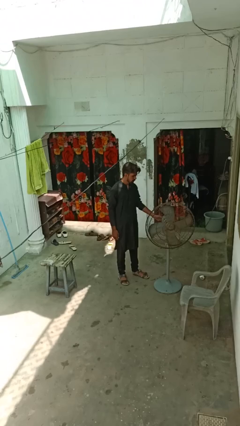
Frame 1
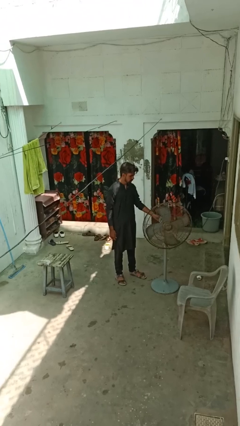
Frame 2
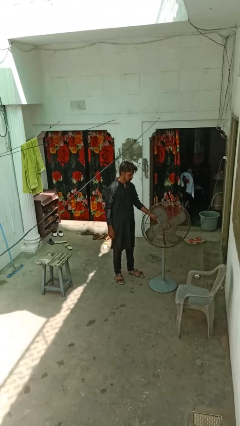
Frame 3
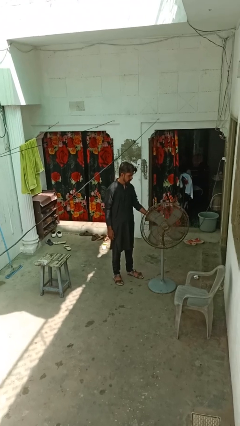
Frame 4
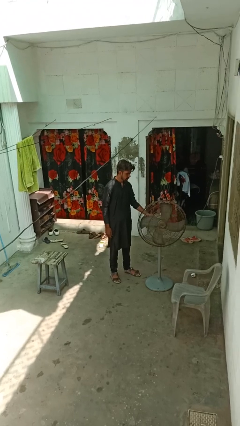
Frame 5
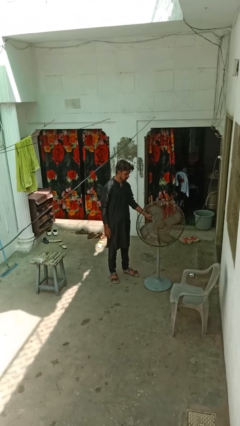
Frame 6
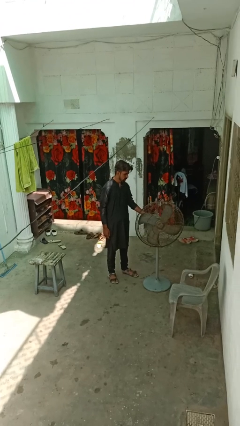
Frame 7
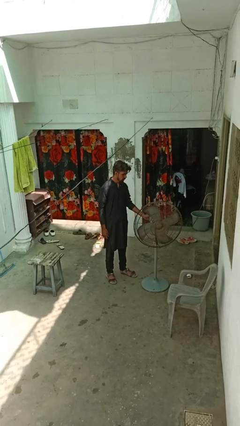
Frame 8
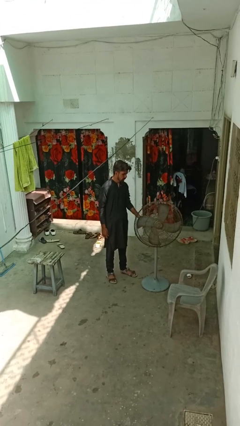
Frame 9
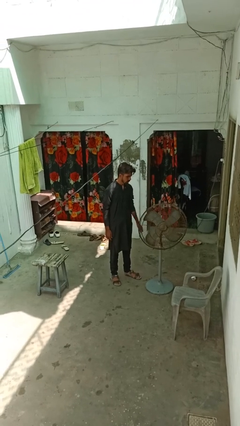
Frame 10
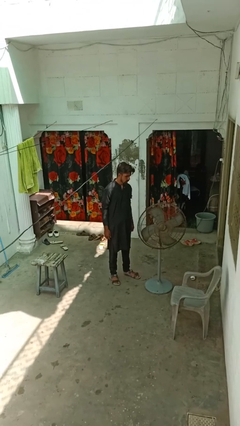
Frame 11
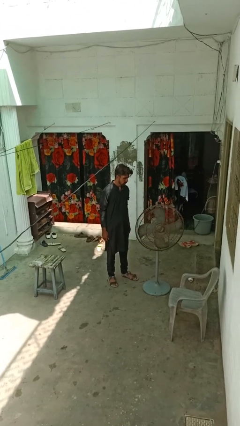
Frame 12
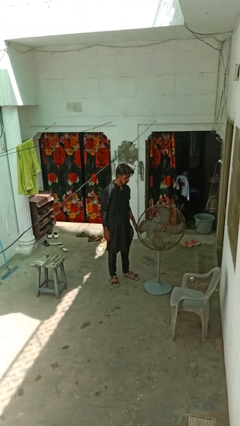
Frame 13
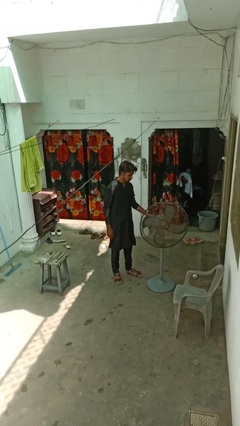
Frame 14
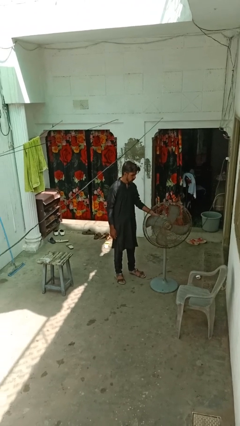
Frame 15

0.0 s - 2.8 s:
person turns off fan

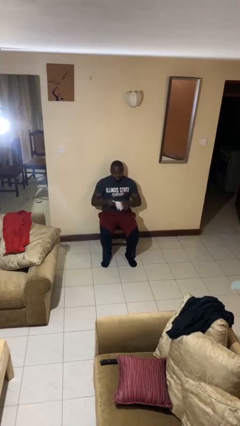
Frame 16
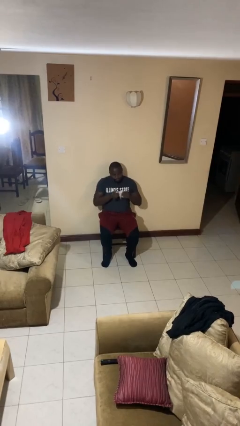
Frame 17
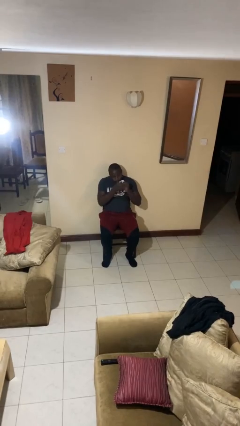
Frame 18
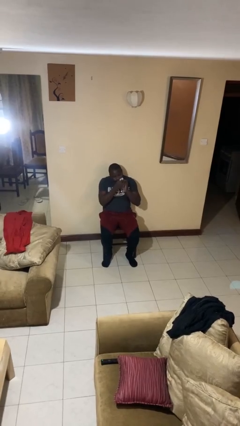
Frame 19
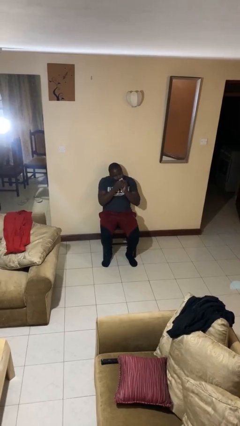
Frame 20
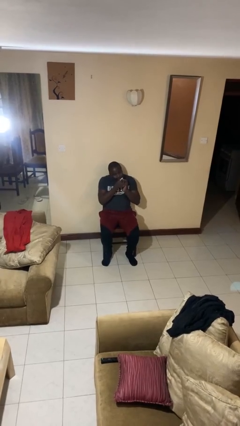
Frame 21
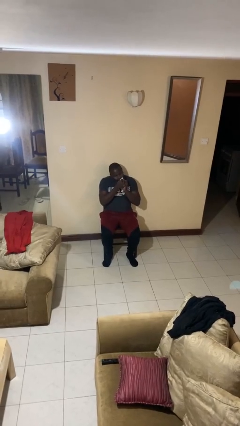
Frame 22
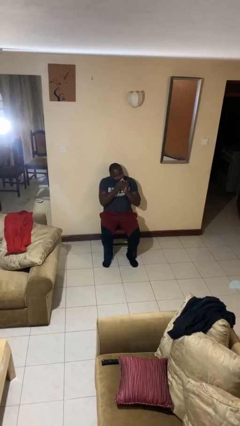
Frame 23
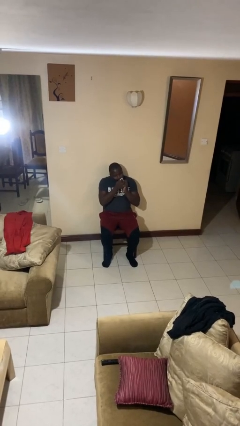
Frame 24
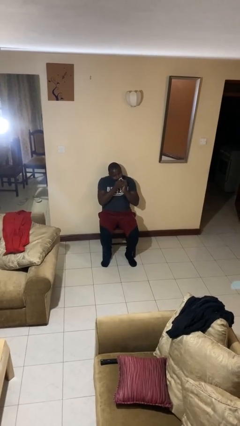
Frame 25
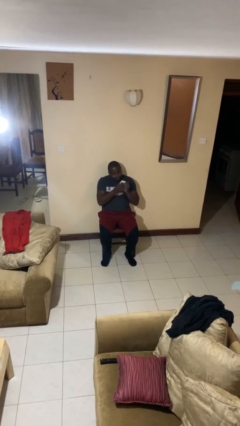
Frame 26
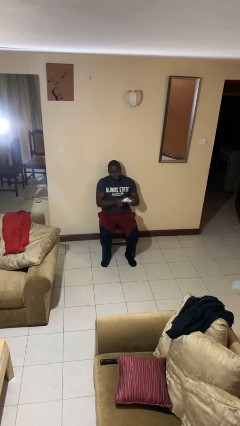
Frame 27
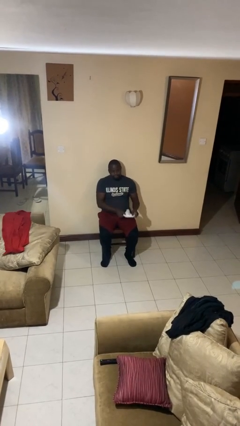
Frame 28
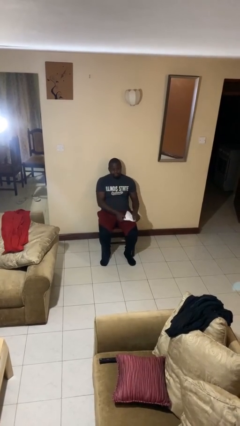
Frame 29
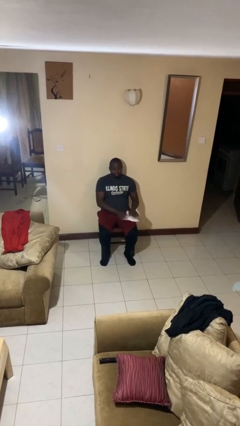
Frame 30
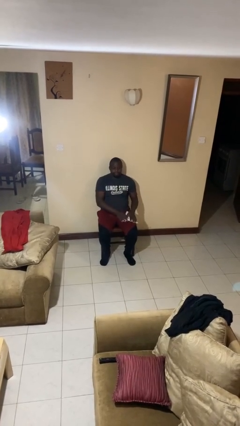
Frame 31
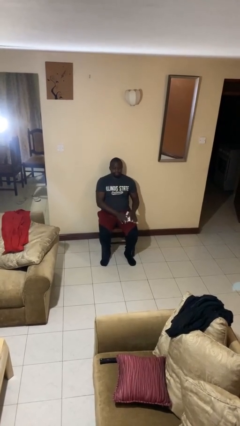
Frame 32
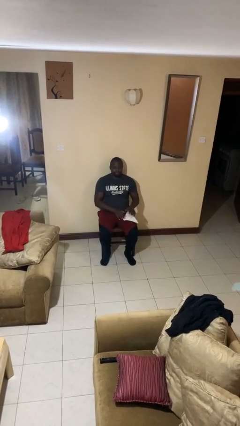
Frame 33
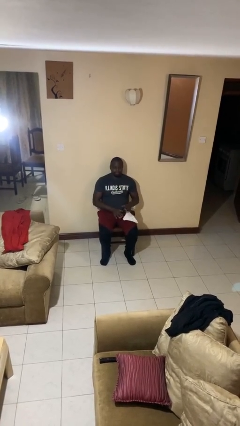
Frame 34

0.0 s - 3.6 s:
person wipes mouth with napkin

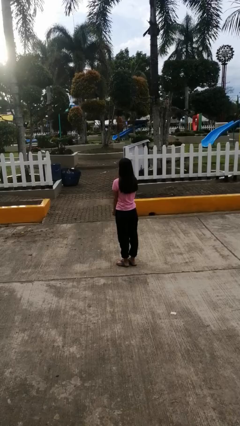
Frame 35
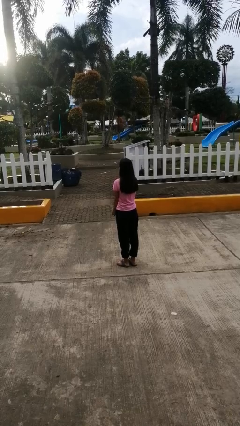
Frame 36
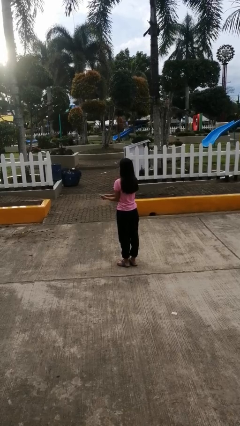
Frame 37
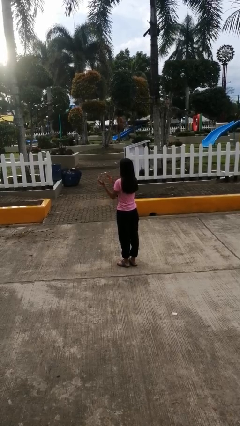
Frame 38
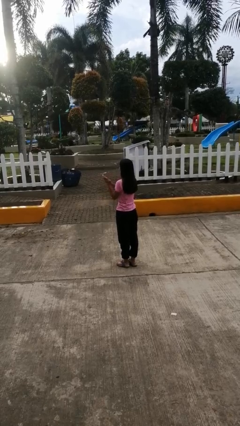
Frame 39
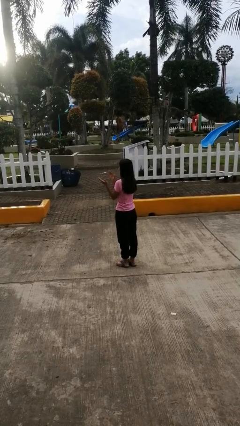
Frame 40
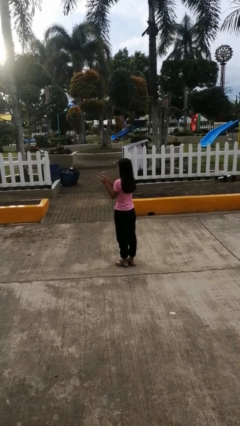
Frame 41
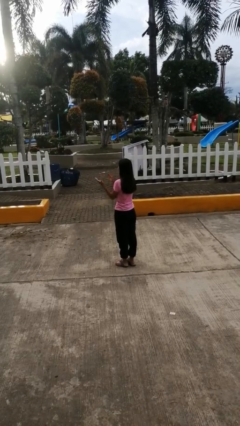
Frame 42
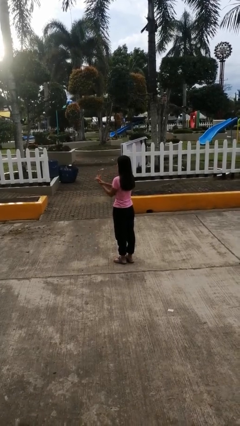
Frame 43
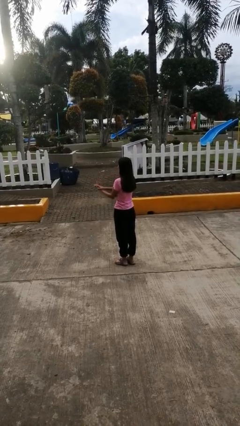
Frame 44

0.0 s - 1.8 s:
person claps hands

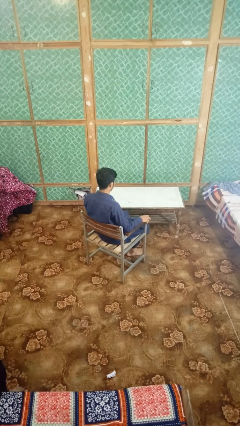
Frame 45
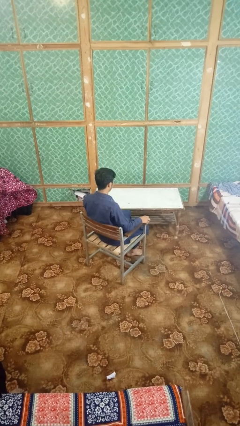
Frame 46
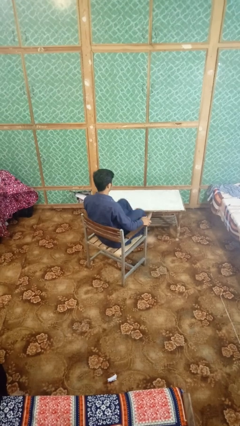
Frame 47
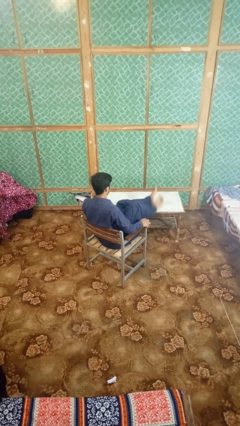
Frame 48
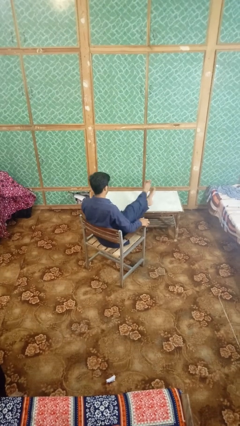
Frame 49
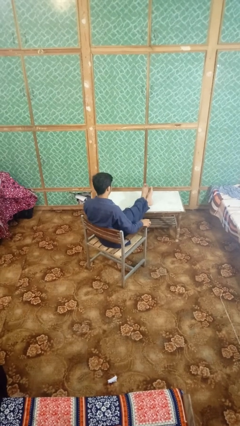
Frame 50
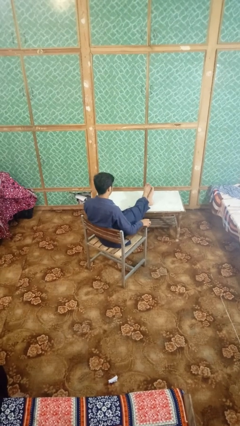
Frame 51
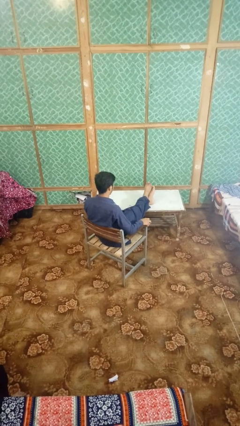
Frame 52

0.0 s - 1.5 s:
person puts feet up

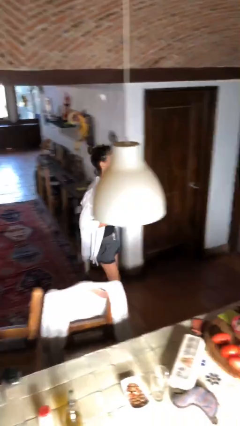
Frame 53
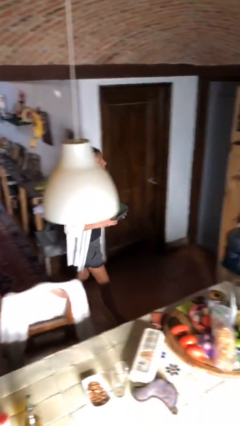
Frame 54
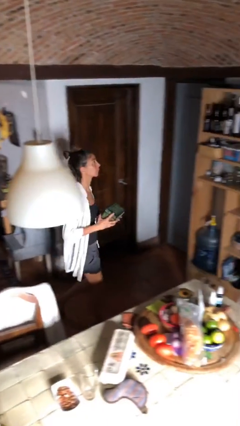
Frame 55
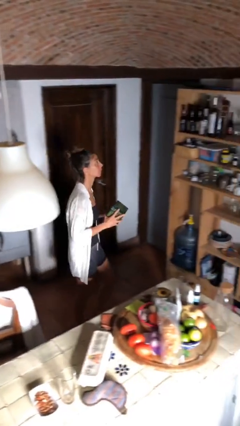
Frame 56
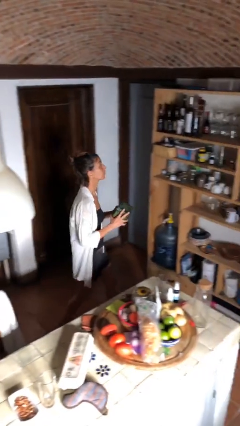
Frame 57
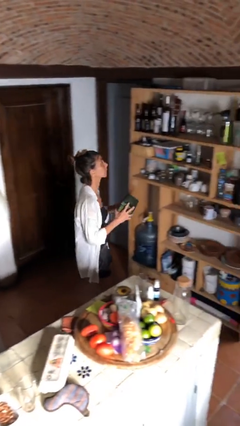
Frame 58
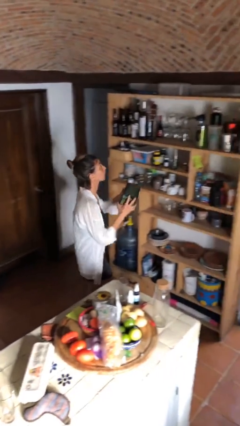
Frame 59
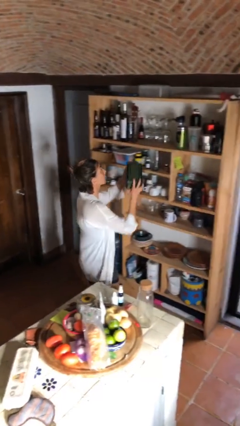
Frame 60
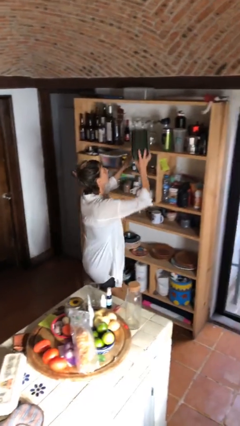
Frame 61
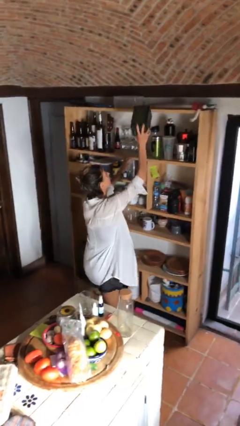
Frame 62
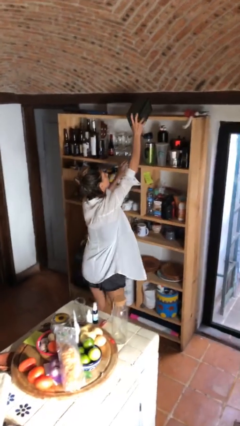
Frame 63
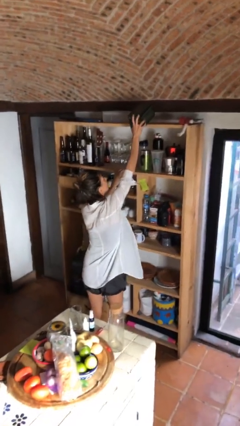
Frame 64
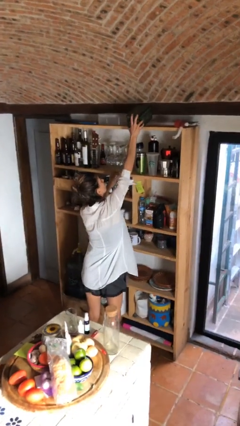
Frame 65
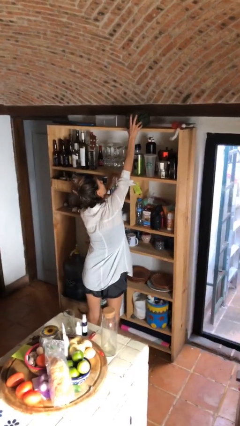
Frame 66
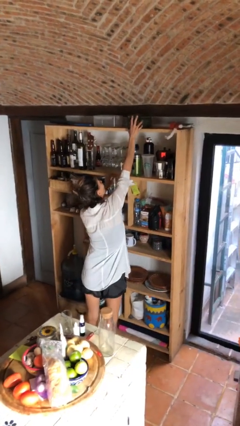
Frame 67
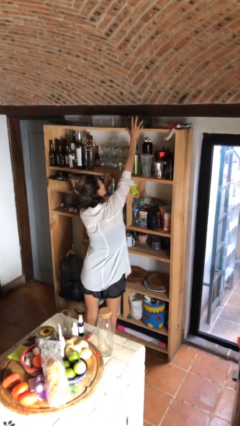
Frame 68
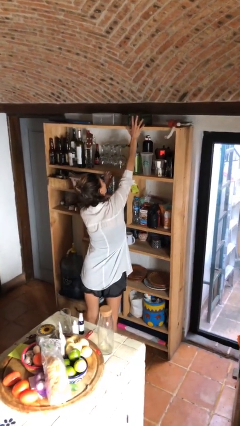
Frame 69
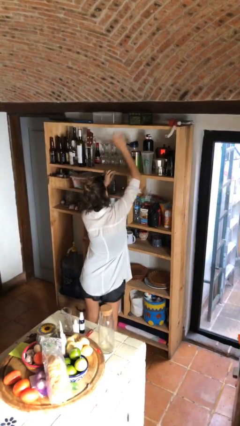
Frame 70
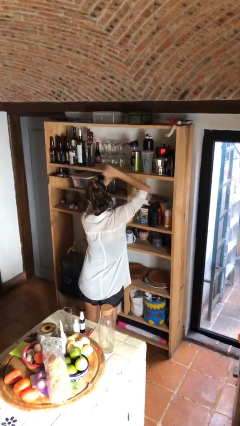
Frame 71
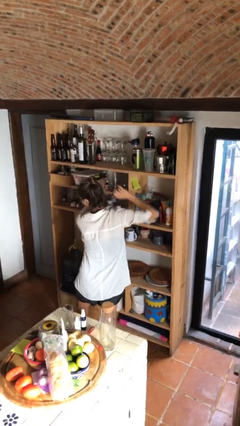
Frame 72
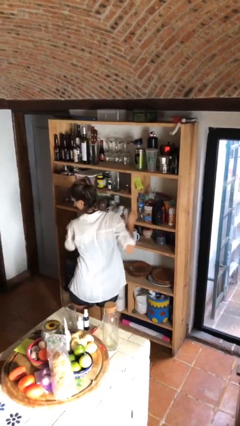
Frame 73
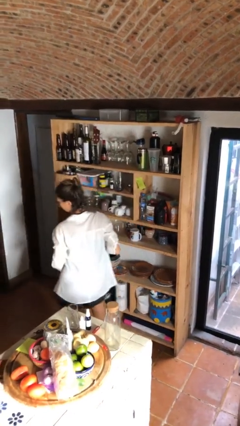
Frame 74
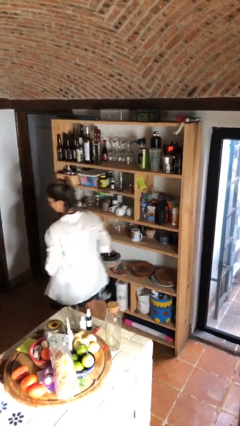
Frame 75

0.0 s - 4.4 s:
person puts down object on shelf

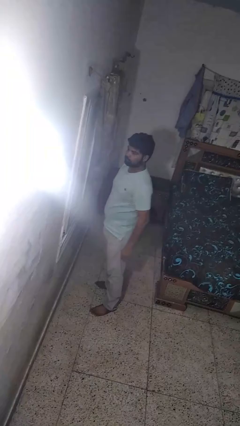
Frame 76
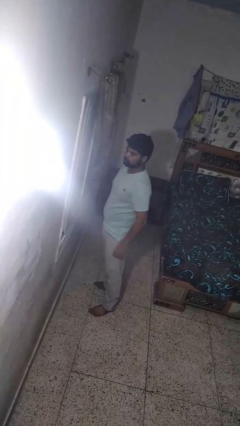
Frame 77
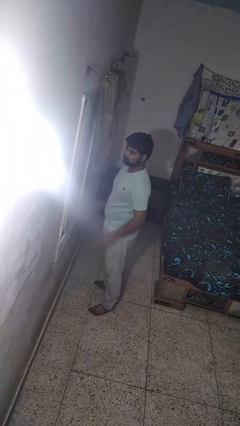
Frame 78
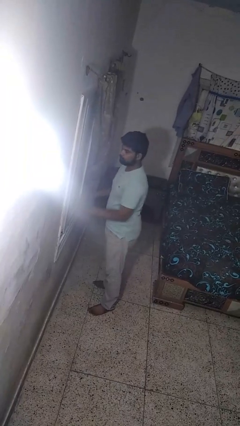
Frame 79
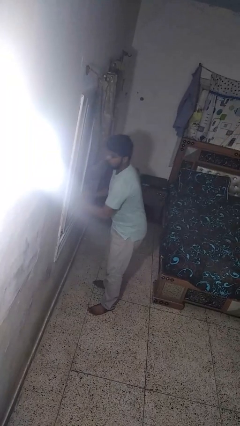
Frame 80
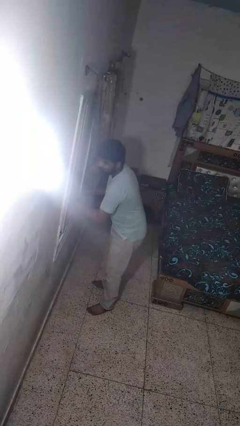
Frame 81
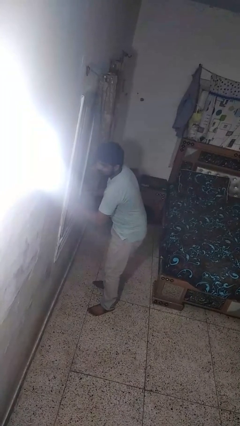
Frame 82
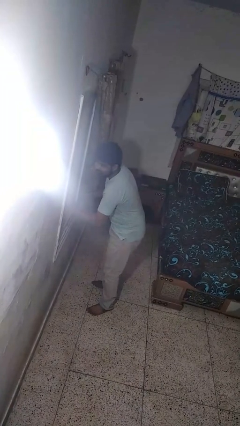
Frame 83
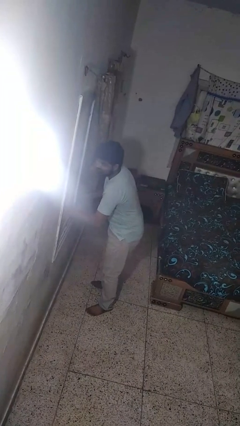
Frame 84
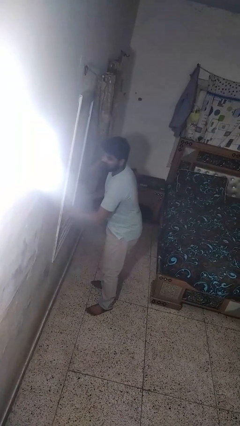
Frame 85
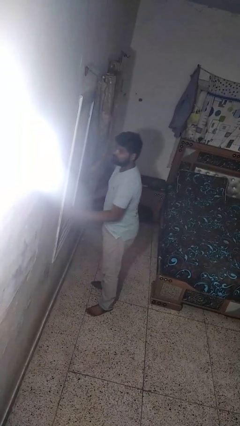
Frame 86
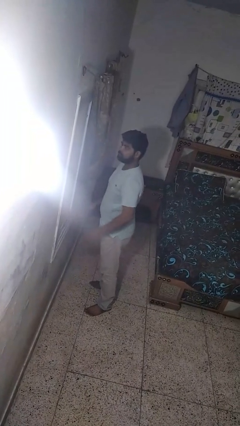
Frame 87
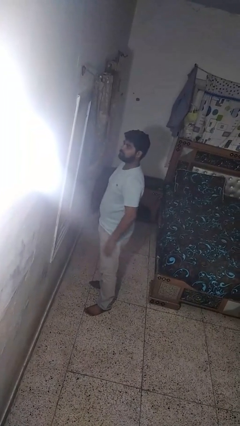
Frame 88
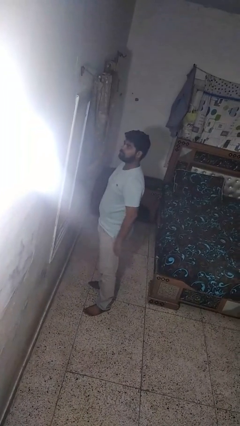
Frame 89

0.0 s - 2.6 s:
person closes sliding door

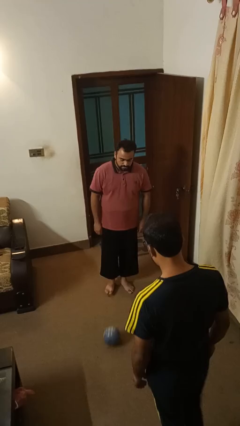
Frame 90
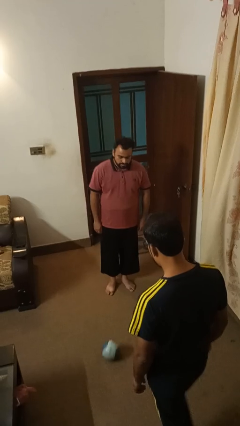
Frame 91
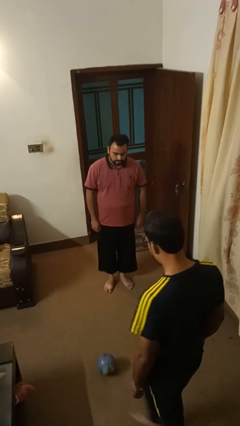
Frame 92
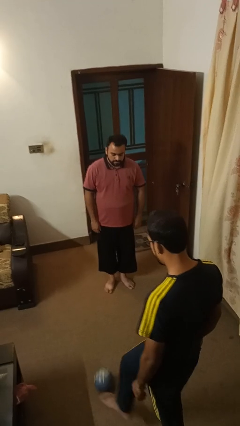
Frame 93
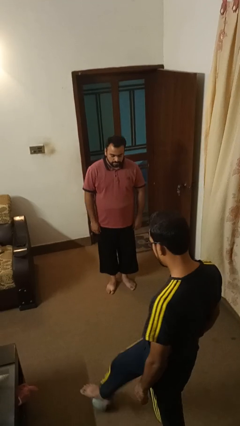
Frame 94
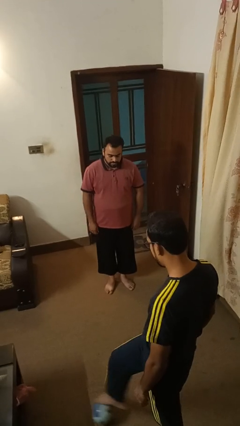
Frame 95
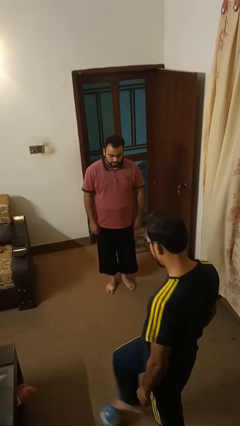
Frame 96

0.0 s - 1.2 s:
person kicks object to person
